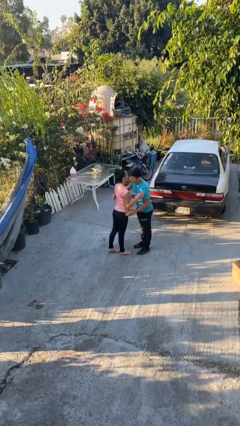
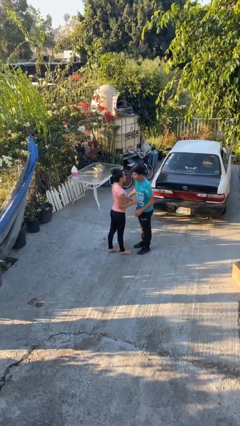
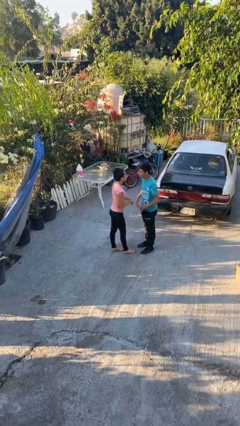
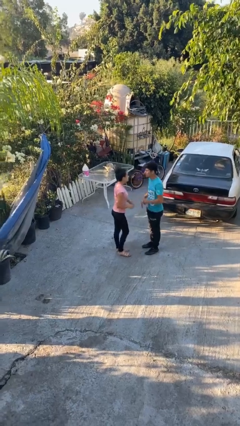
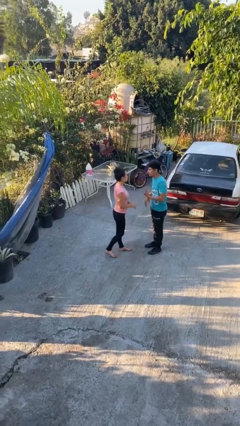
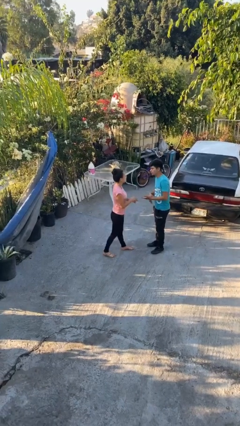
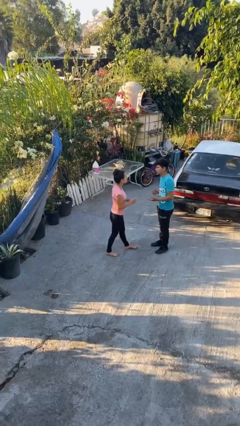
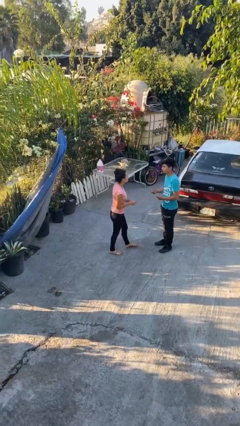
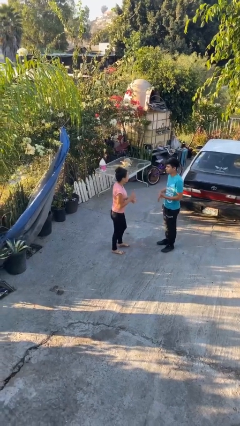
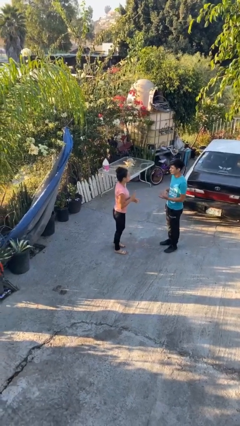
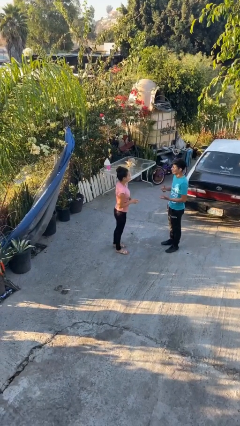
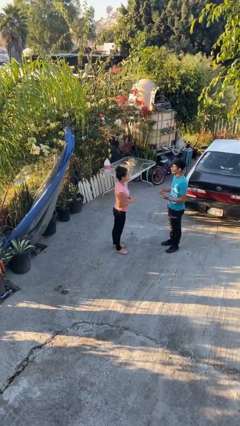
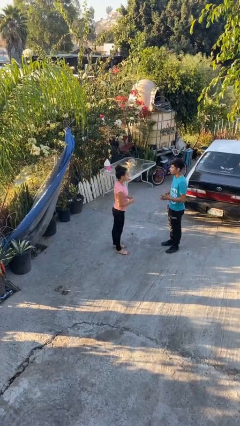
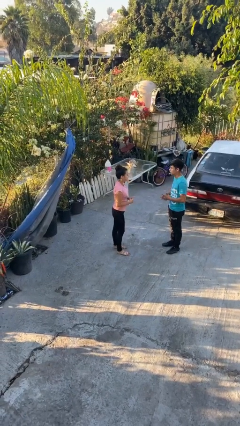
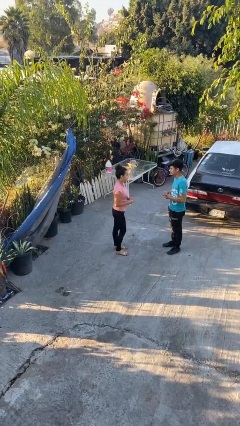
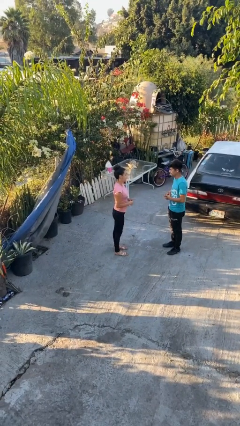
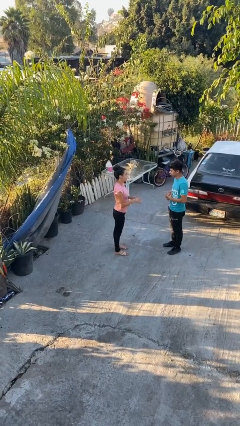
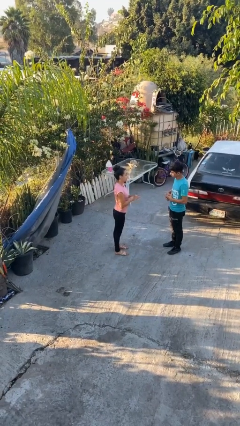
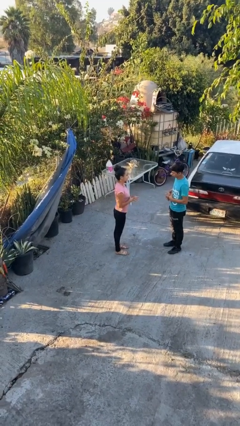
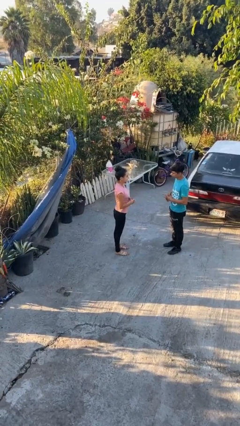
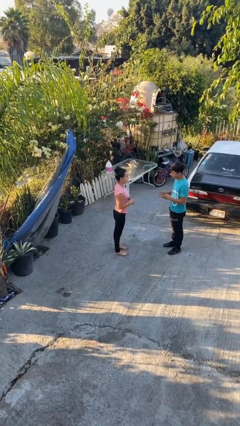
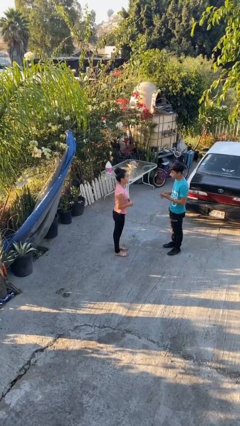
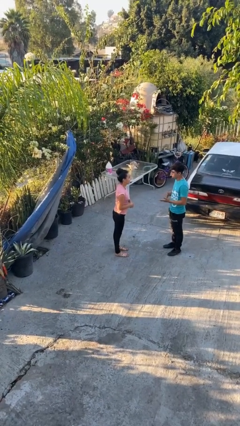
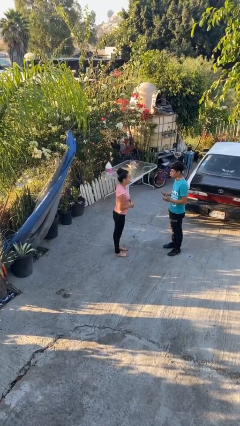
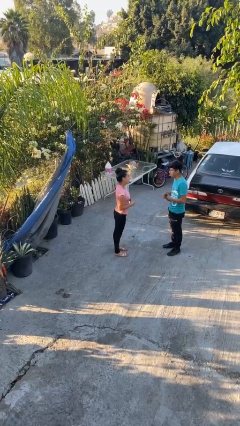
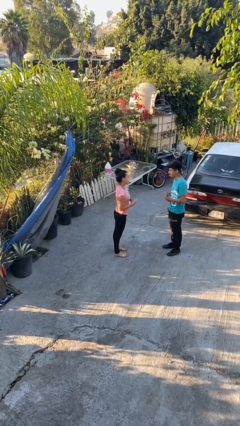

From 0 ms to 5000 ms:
person talks to person

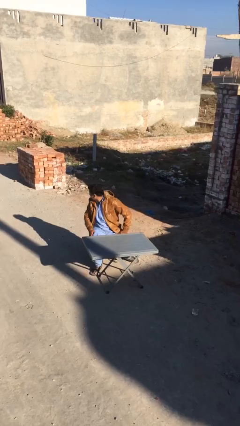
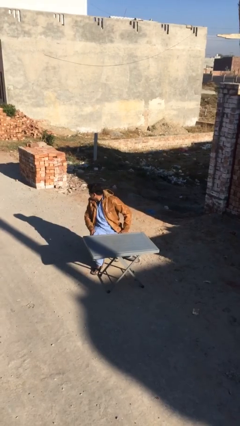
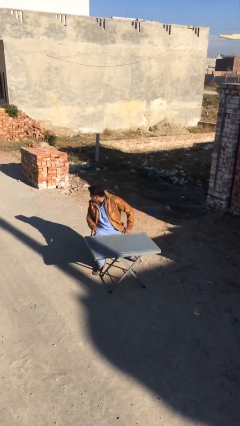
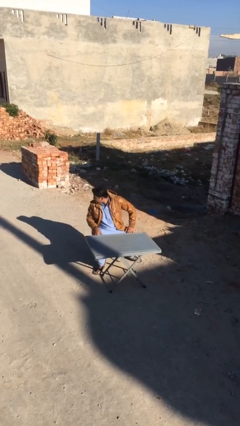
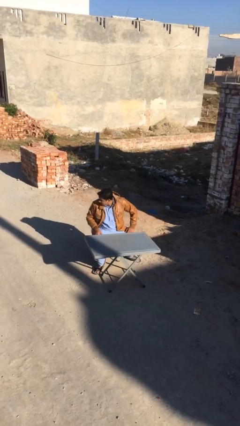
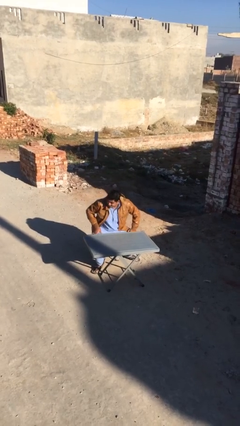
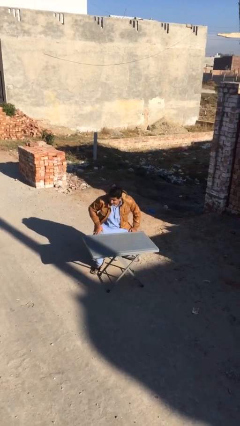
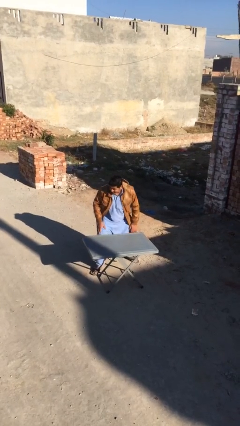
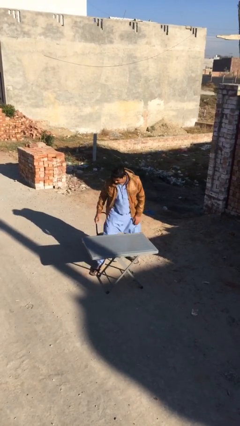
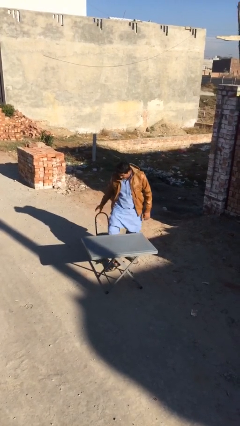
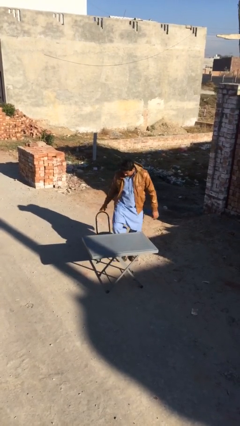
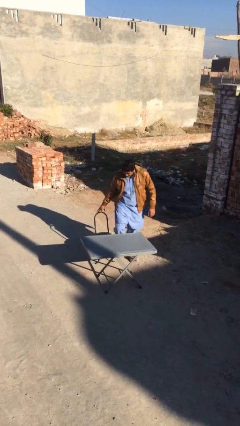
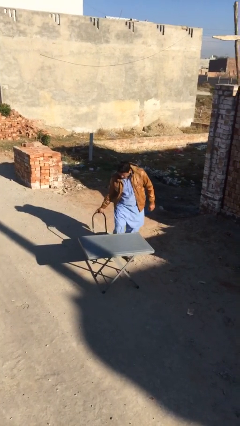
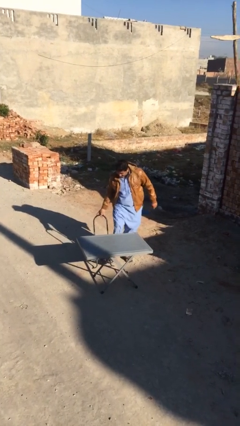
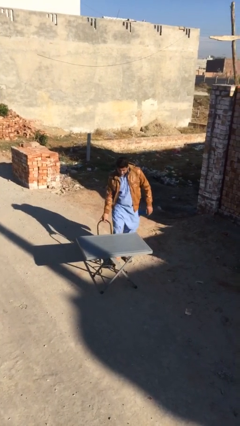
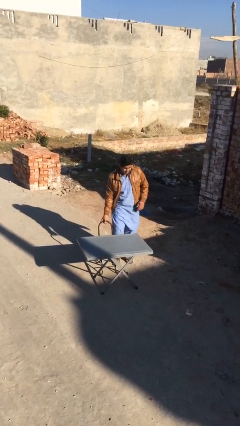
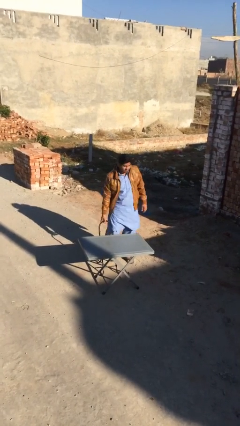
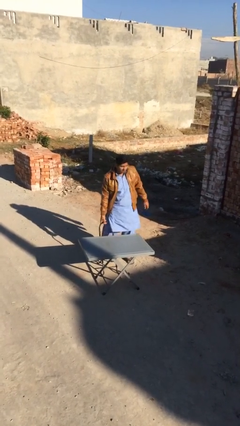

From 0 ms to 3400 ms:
person stands up

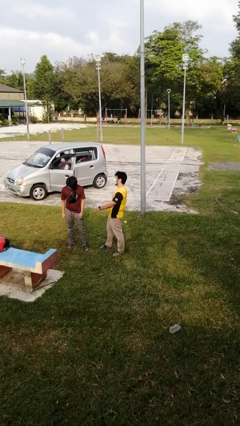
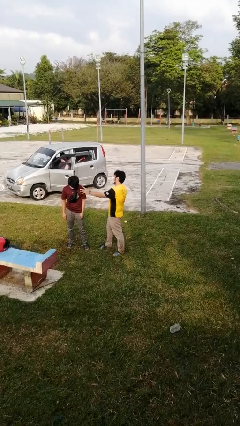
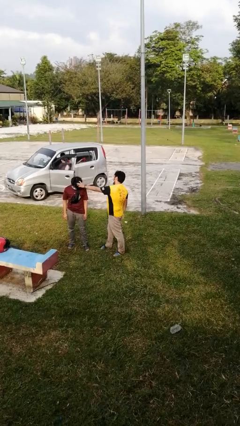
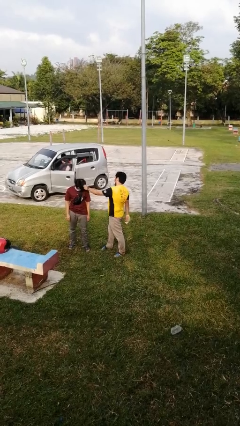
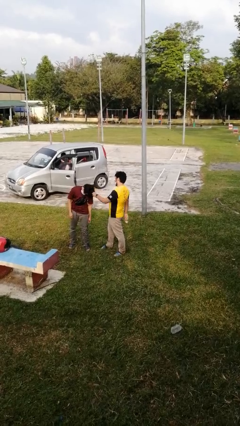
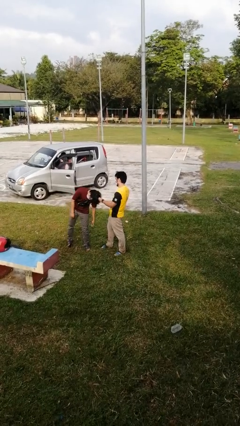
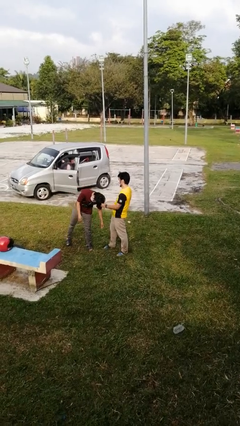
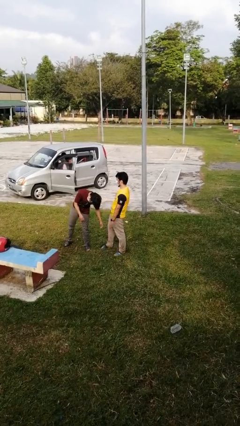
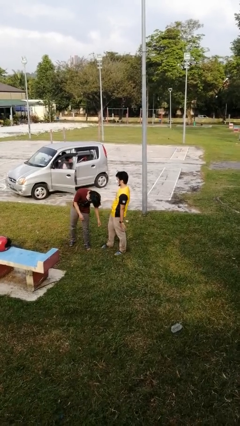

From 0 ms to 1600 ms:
person grabs person by hair

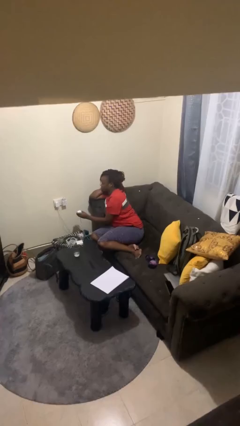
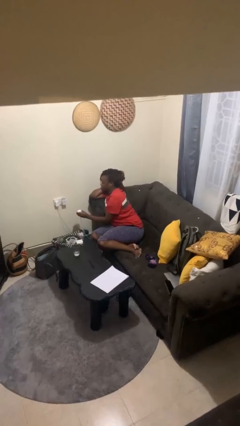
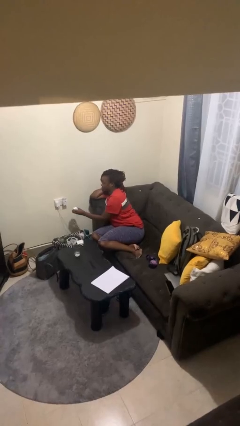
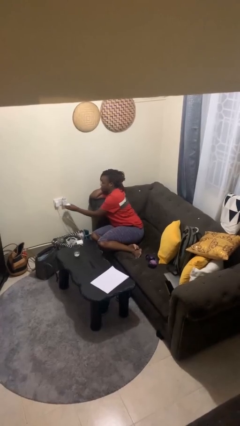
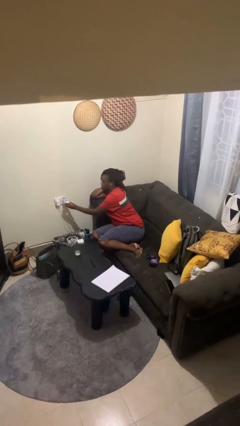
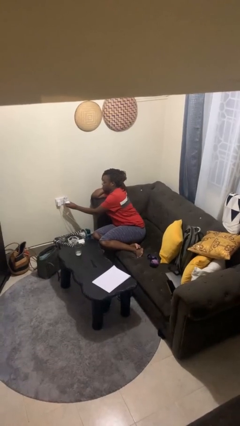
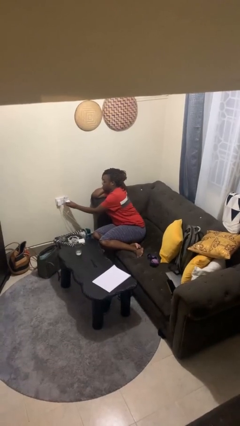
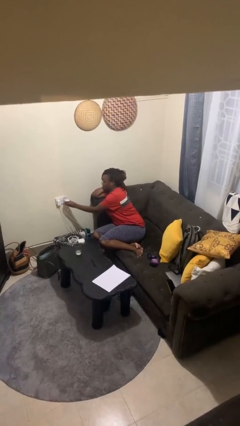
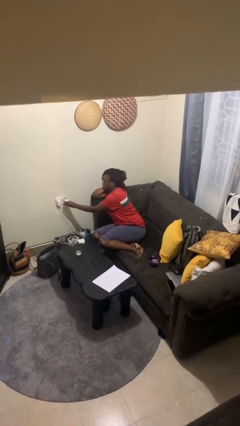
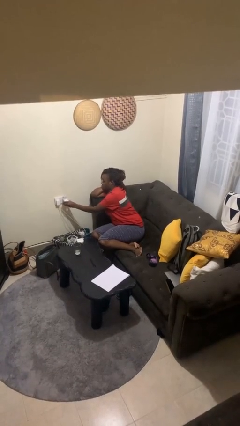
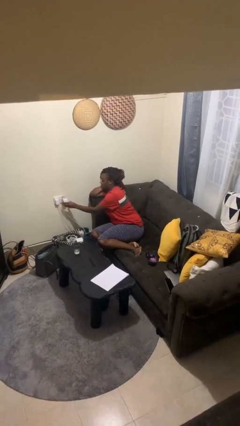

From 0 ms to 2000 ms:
person plugs into electrical socket

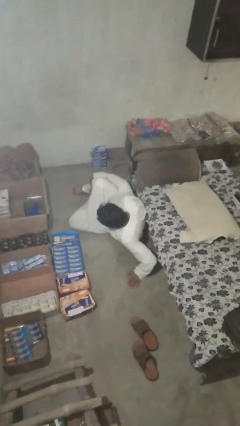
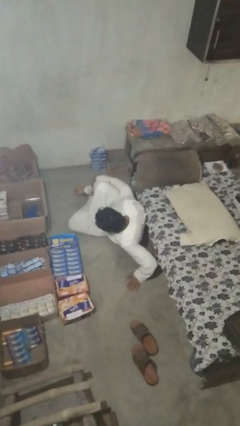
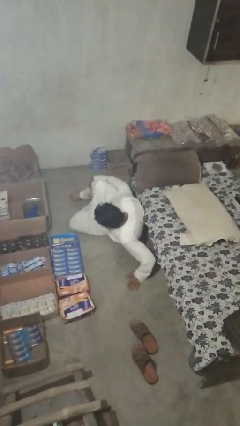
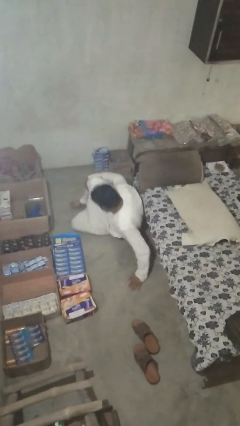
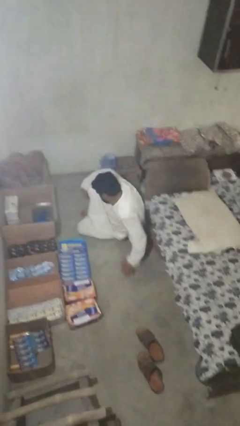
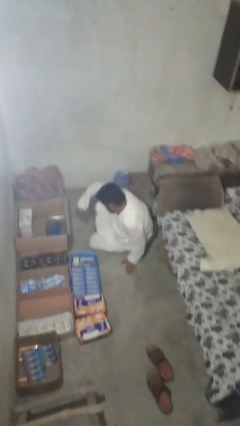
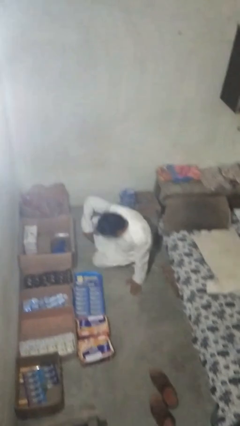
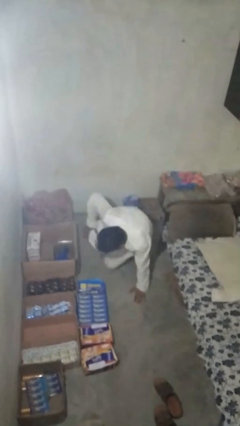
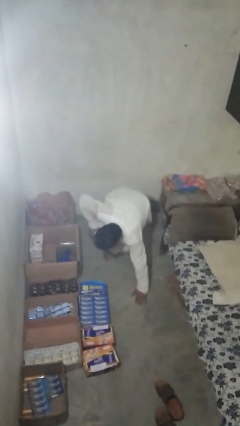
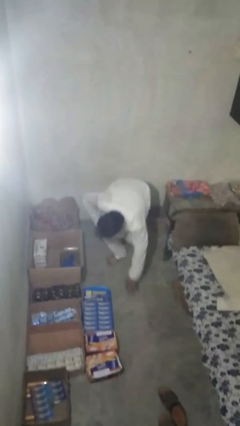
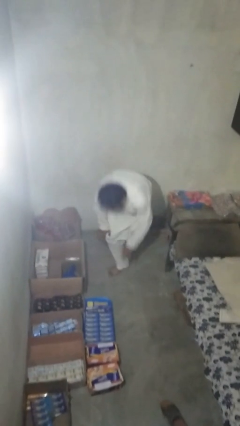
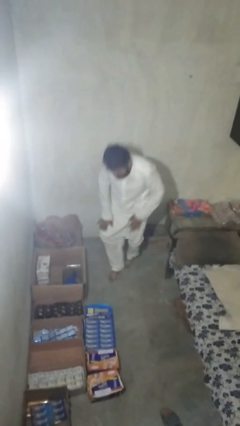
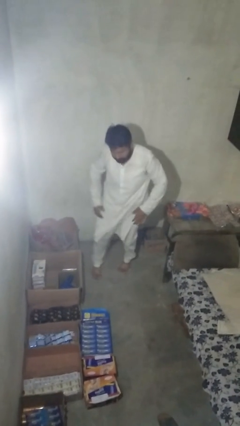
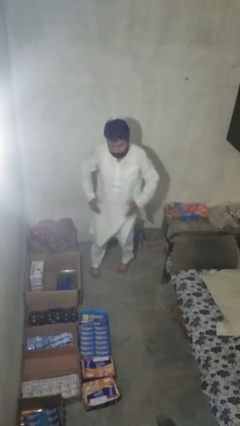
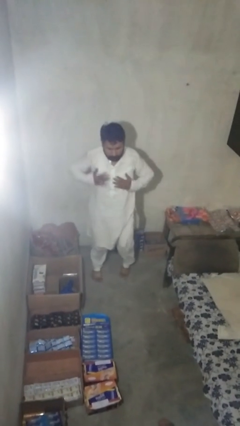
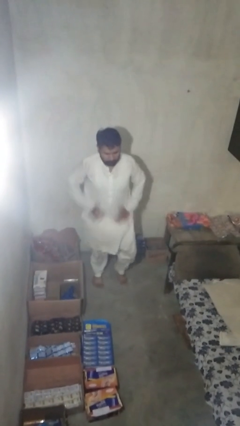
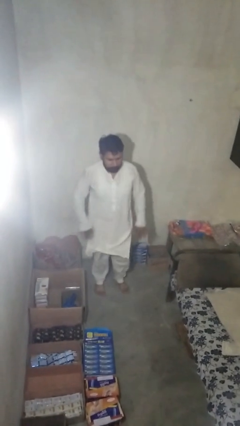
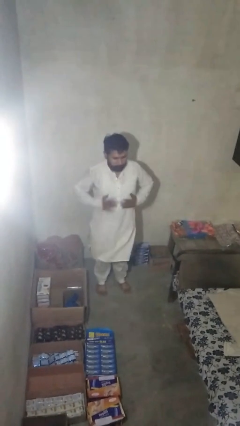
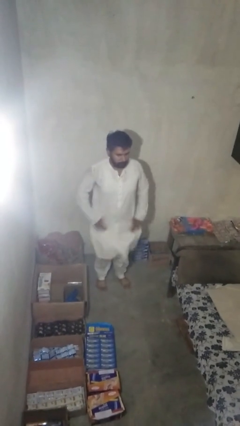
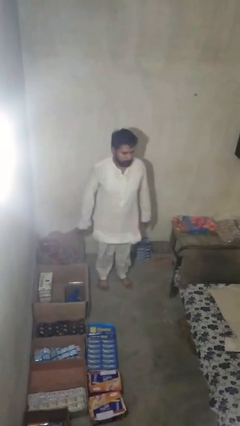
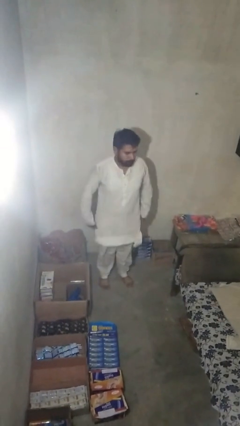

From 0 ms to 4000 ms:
person stands up from floor

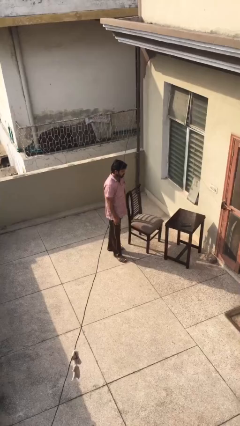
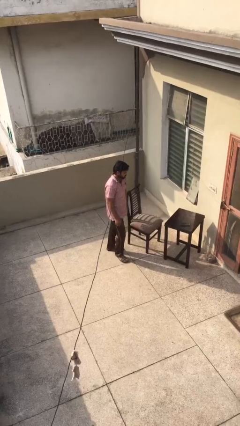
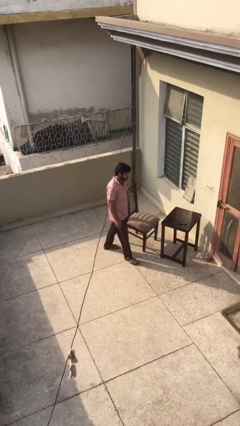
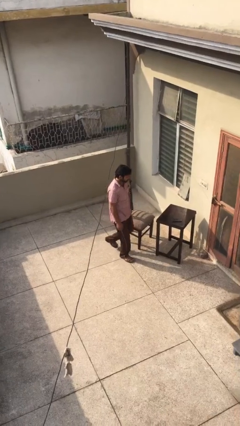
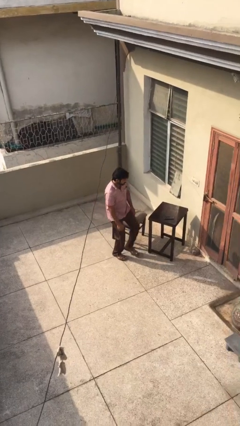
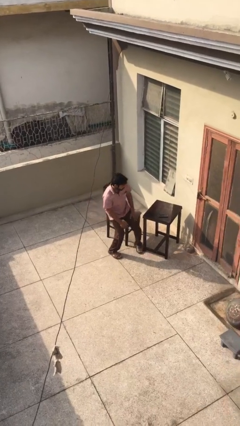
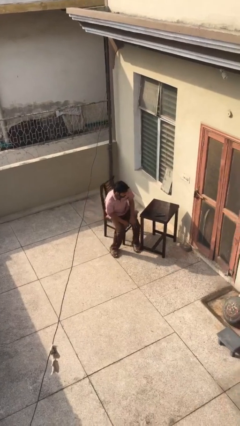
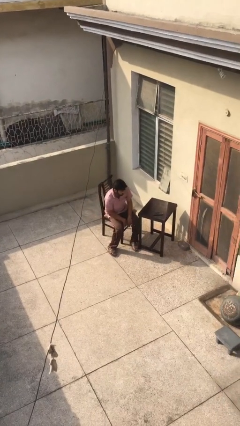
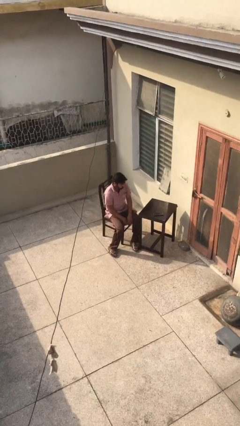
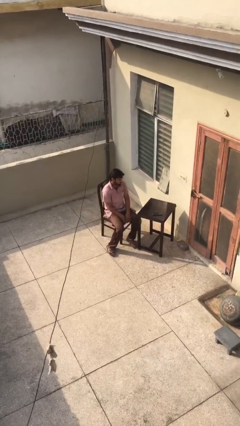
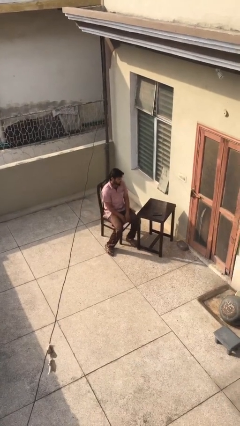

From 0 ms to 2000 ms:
person sits down
